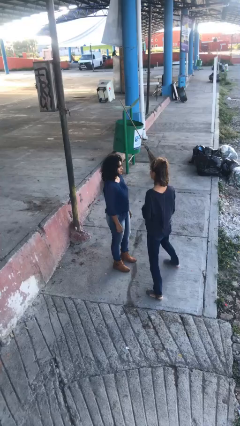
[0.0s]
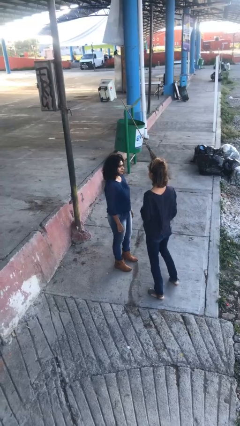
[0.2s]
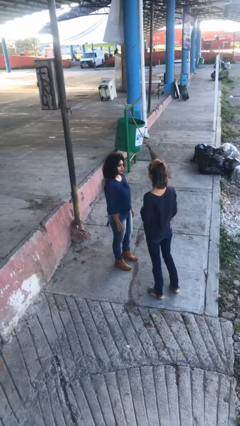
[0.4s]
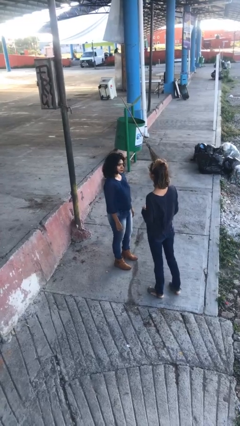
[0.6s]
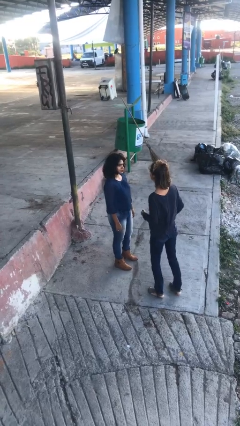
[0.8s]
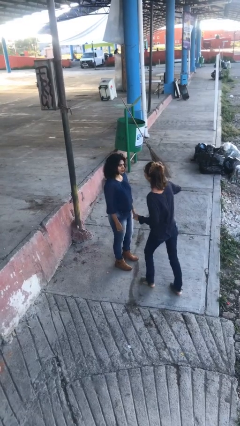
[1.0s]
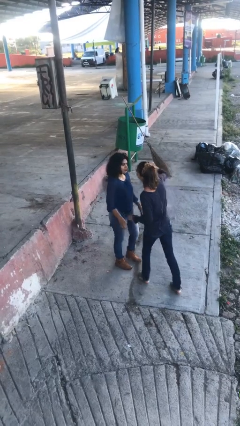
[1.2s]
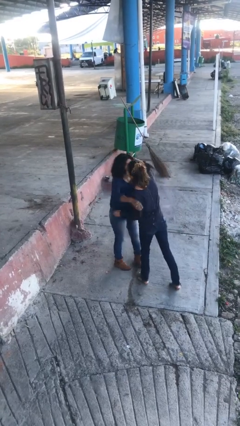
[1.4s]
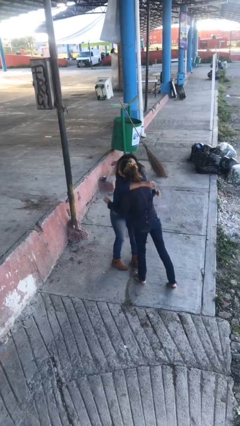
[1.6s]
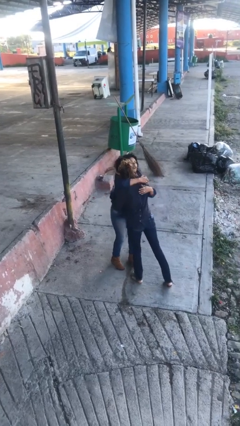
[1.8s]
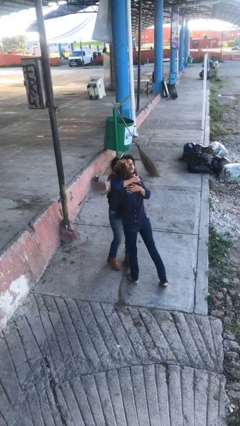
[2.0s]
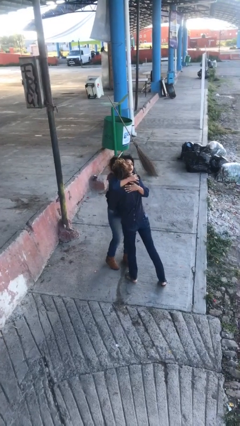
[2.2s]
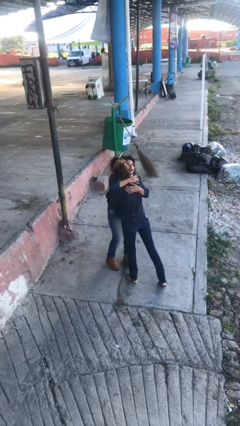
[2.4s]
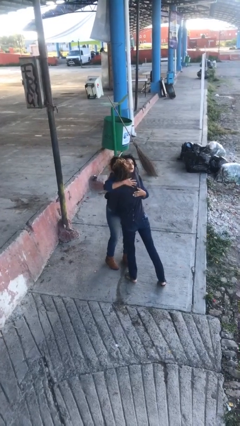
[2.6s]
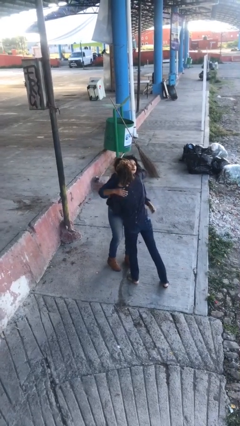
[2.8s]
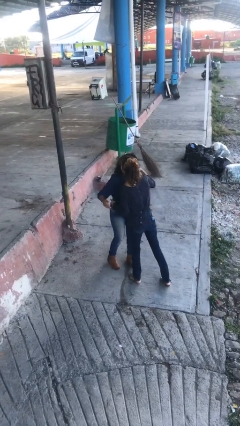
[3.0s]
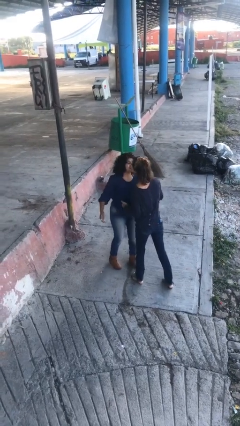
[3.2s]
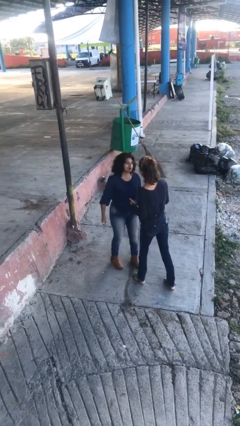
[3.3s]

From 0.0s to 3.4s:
person embraces person

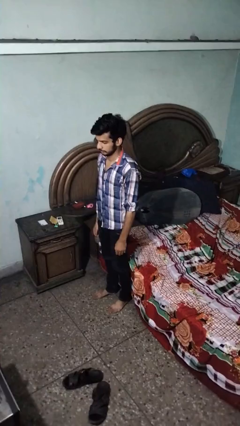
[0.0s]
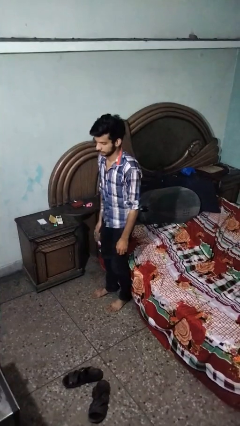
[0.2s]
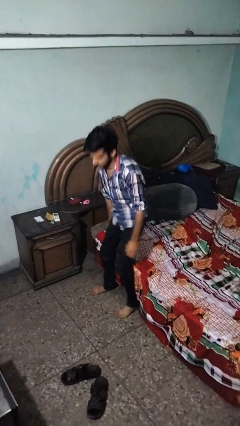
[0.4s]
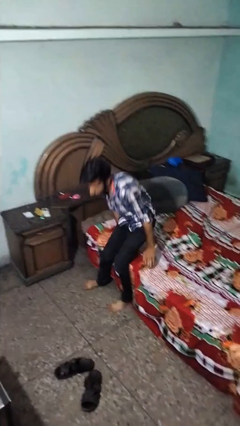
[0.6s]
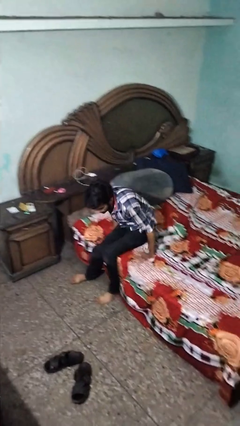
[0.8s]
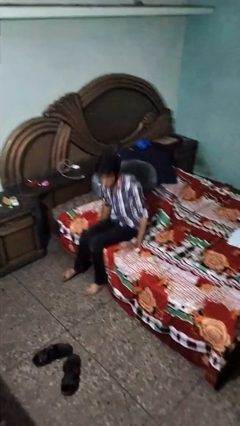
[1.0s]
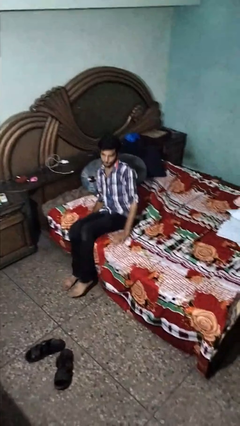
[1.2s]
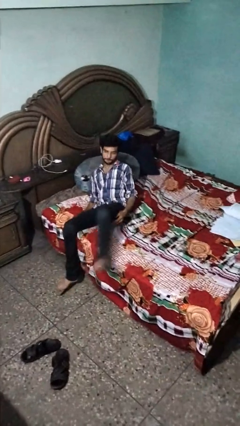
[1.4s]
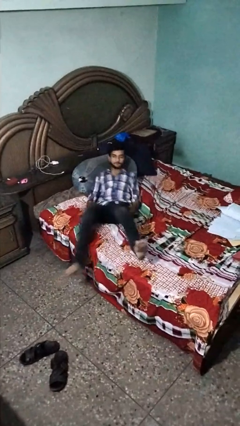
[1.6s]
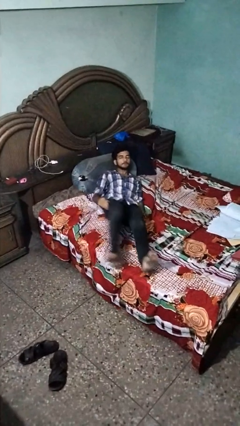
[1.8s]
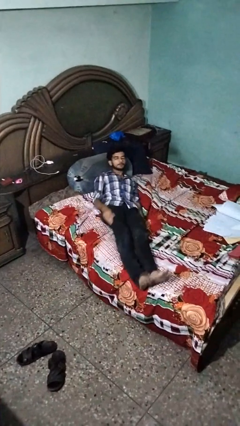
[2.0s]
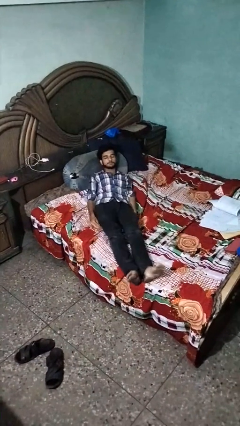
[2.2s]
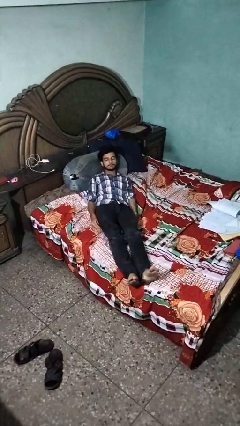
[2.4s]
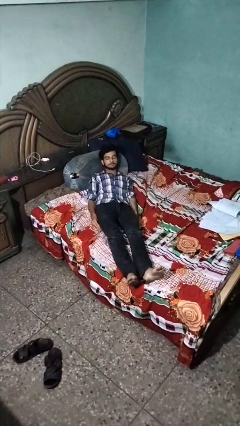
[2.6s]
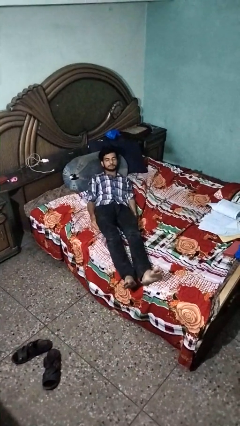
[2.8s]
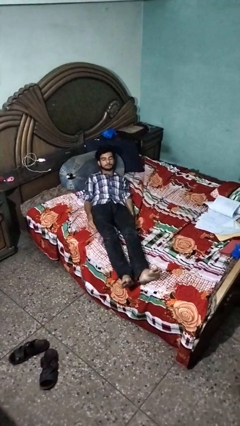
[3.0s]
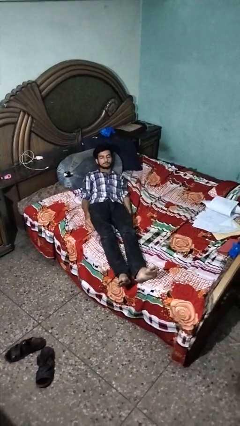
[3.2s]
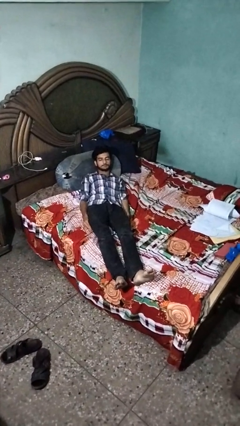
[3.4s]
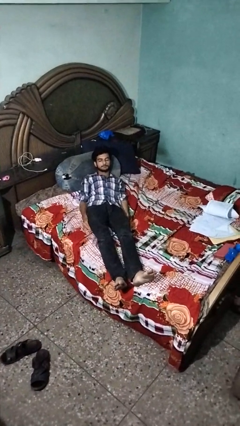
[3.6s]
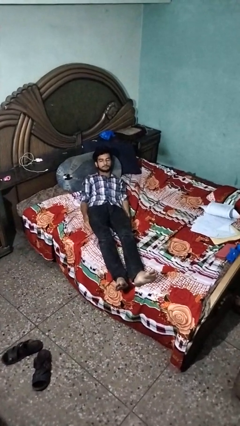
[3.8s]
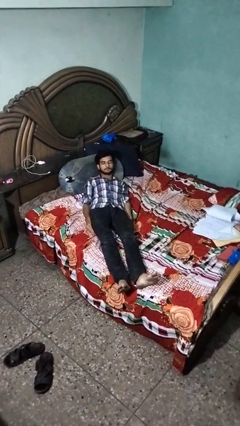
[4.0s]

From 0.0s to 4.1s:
person lies down on bed

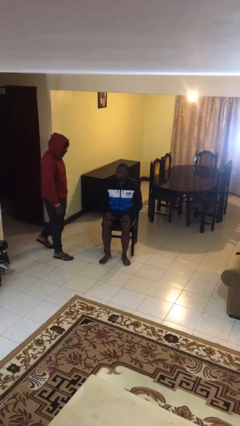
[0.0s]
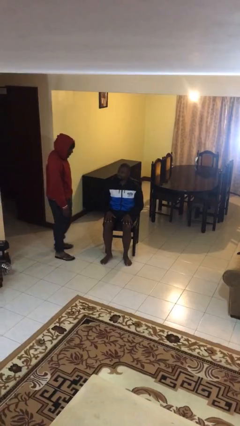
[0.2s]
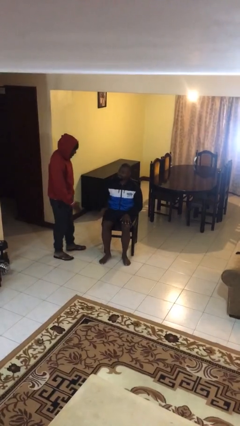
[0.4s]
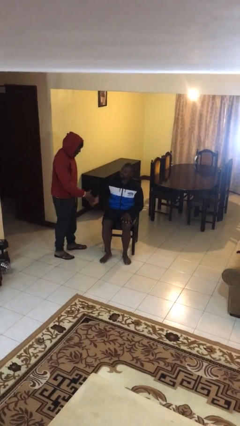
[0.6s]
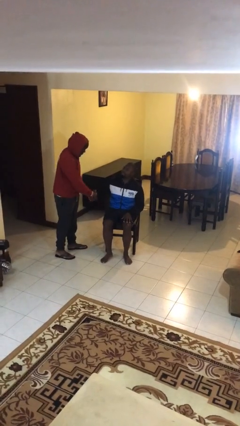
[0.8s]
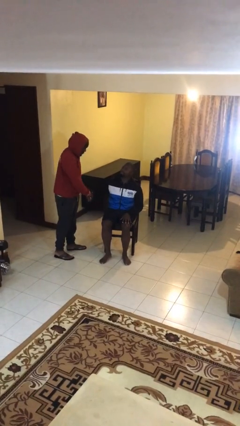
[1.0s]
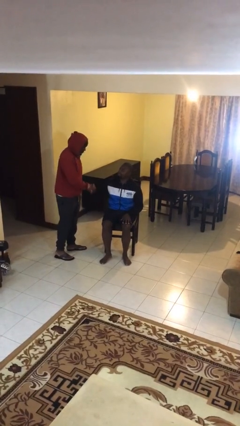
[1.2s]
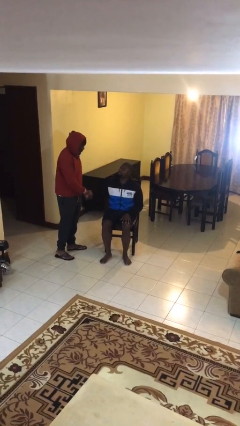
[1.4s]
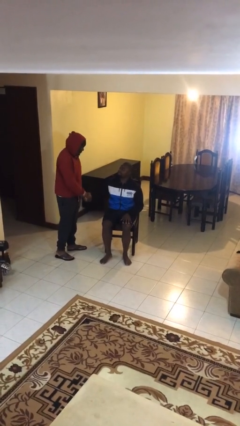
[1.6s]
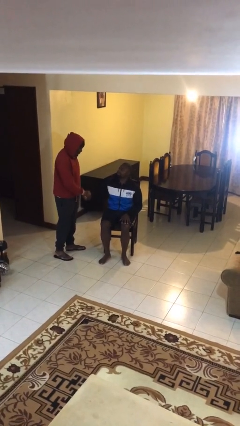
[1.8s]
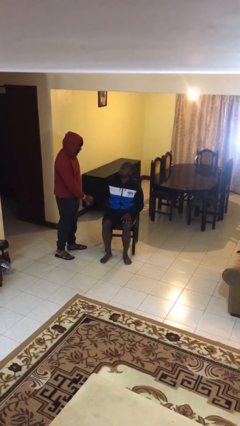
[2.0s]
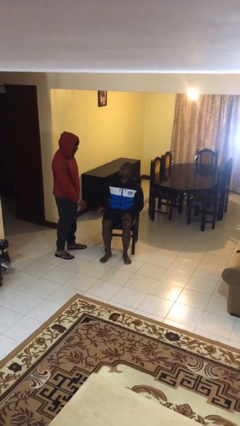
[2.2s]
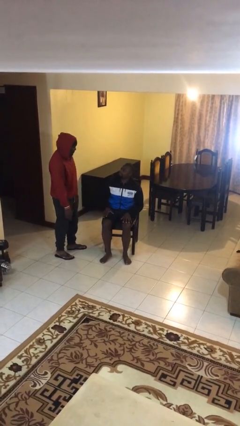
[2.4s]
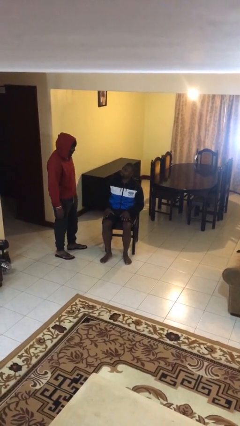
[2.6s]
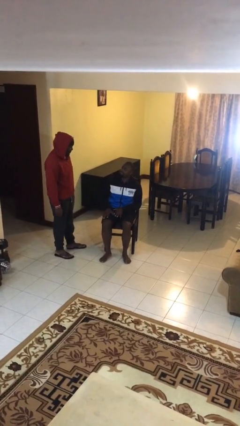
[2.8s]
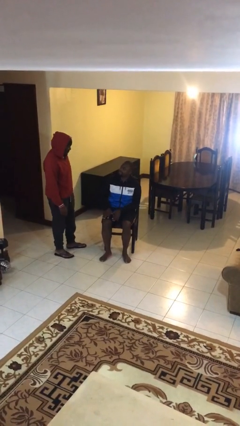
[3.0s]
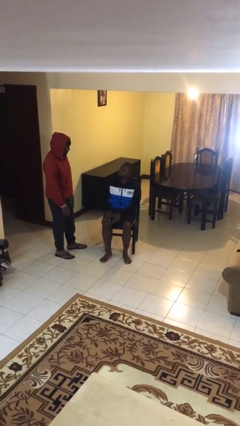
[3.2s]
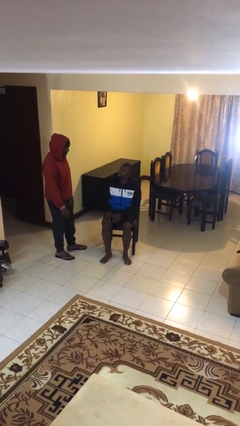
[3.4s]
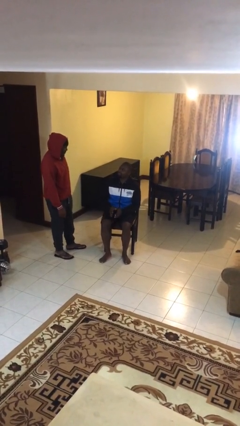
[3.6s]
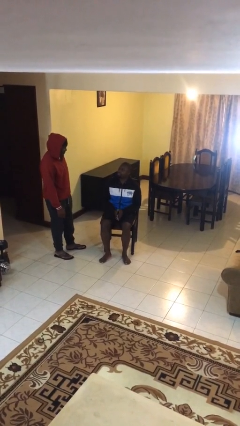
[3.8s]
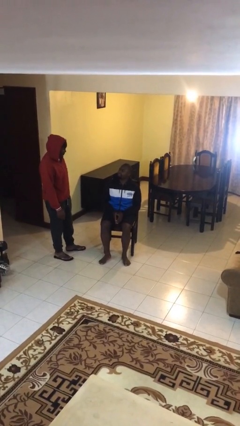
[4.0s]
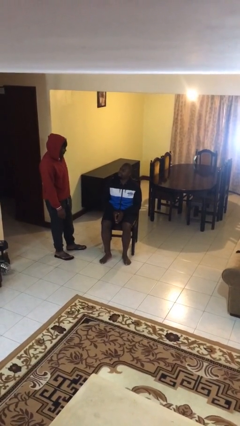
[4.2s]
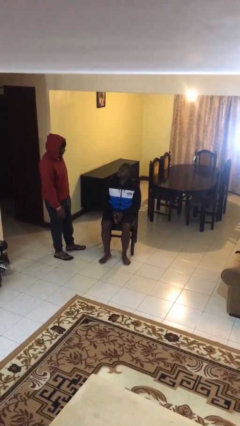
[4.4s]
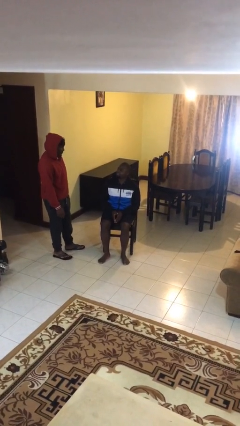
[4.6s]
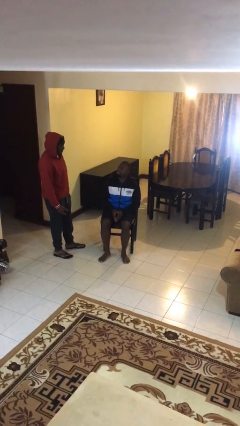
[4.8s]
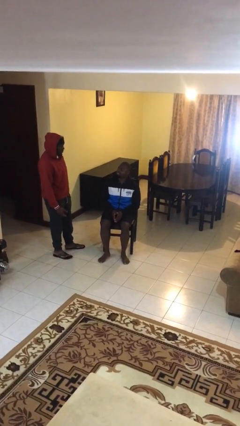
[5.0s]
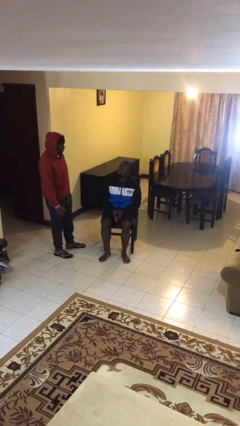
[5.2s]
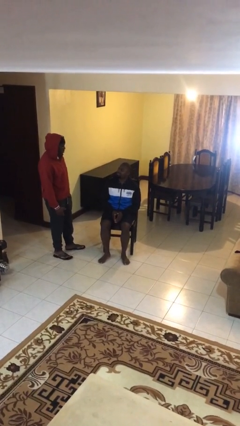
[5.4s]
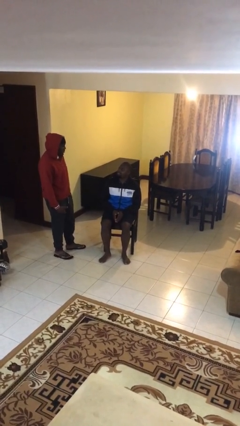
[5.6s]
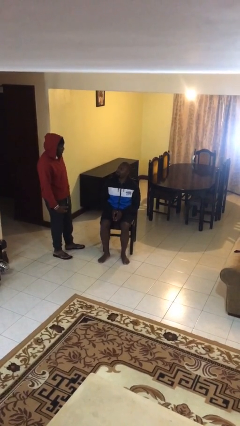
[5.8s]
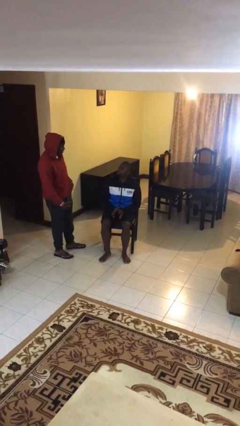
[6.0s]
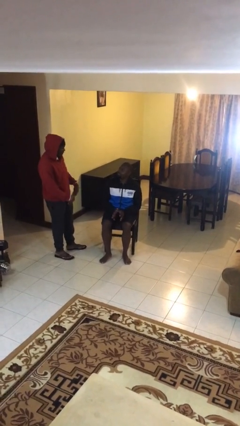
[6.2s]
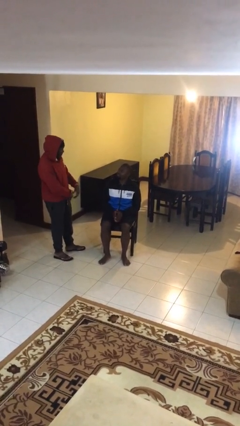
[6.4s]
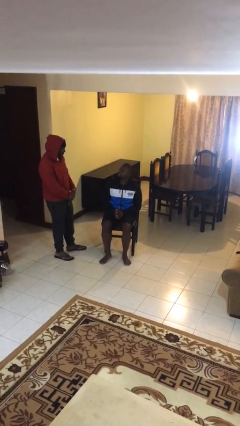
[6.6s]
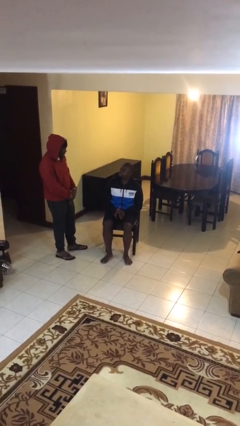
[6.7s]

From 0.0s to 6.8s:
person shakes hand

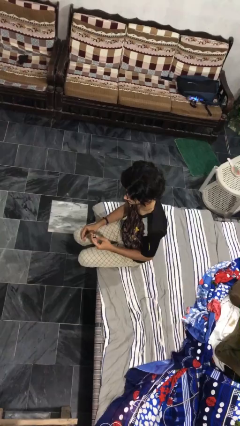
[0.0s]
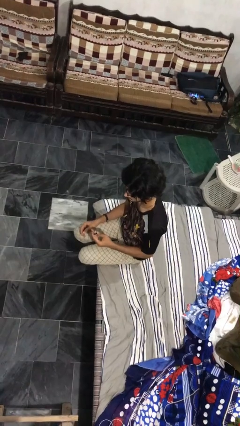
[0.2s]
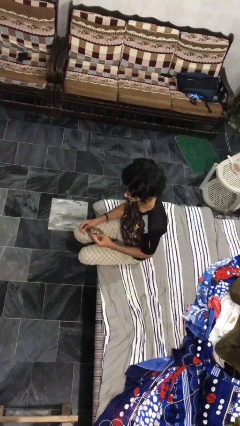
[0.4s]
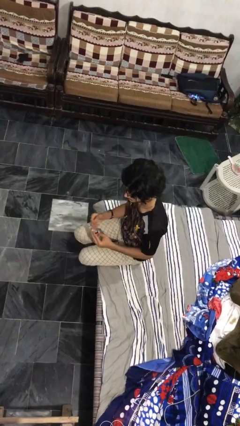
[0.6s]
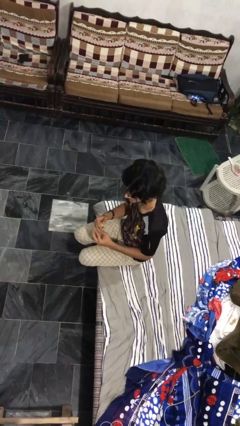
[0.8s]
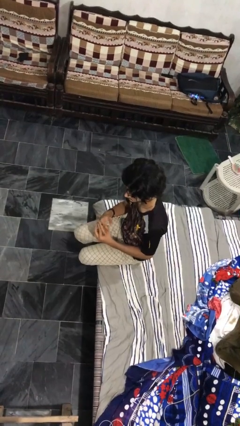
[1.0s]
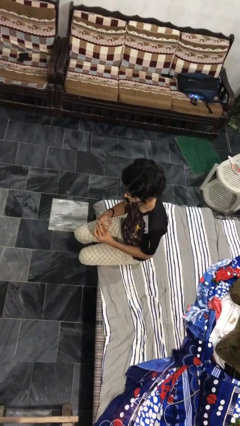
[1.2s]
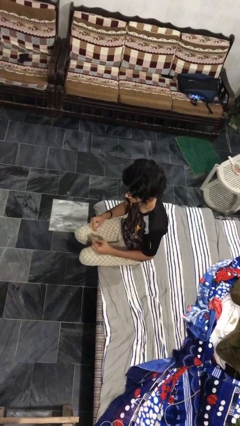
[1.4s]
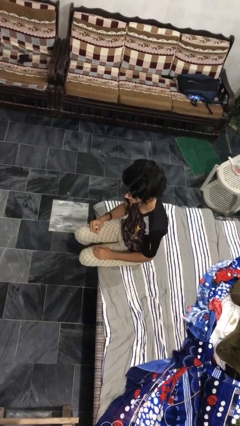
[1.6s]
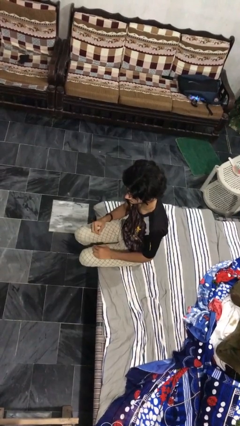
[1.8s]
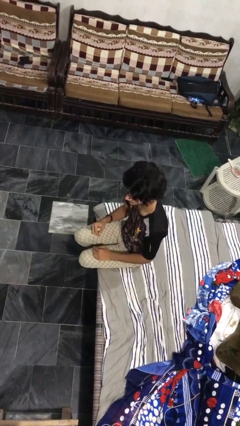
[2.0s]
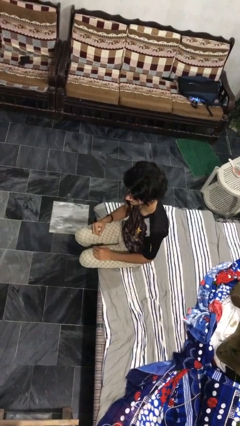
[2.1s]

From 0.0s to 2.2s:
person puts on ring

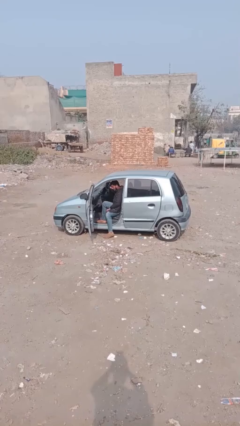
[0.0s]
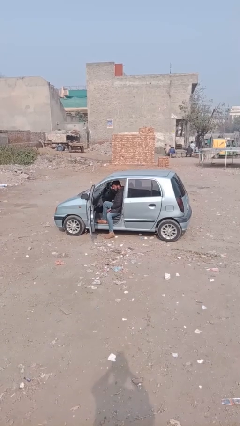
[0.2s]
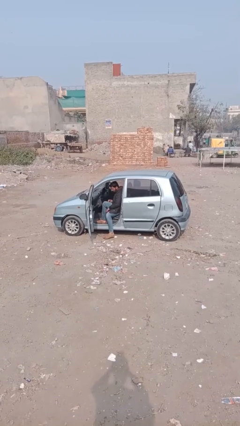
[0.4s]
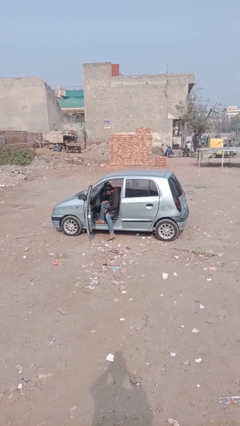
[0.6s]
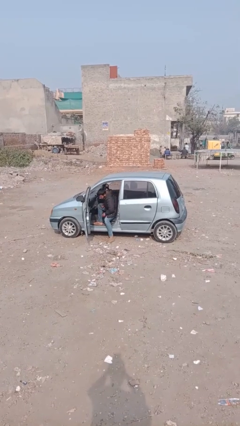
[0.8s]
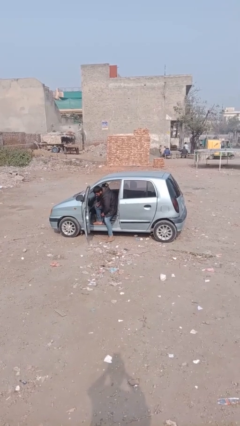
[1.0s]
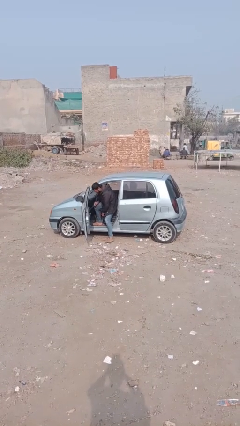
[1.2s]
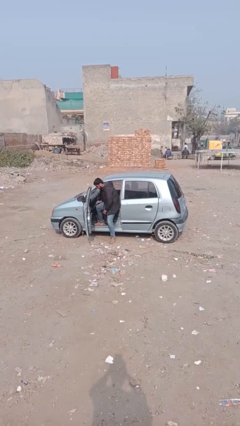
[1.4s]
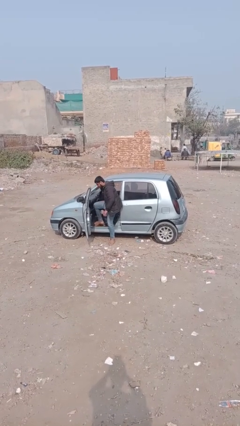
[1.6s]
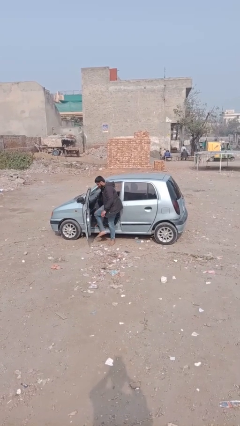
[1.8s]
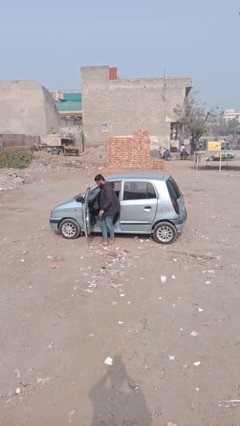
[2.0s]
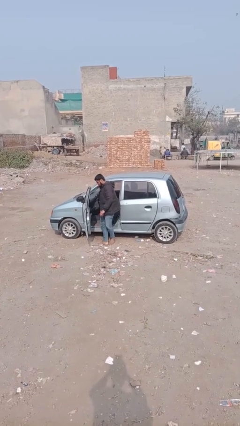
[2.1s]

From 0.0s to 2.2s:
person exits car
